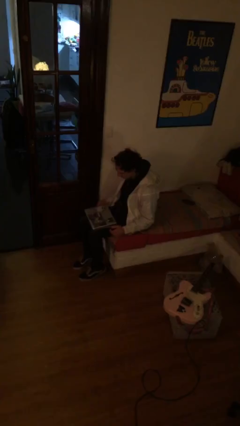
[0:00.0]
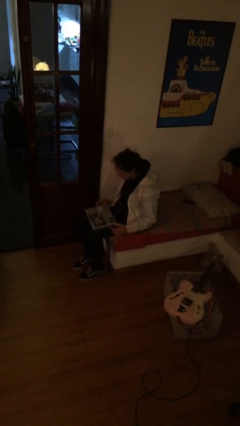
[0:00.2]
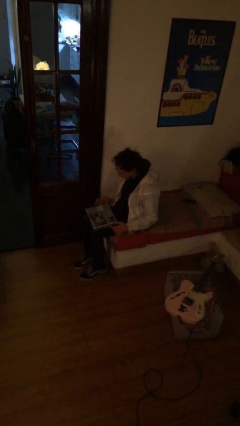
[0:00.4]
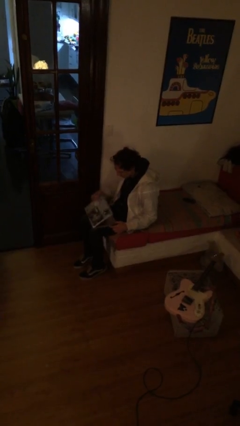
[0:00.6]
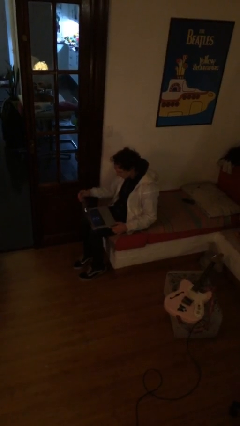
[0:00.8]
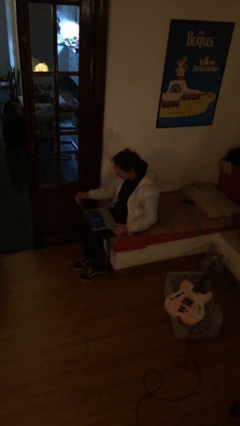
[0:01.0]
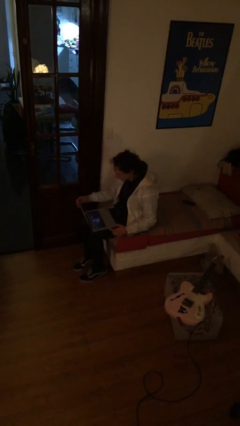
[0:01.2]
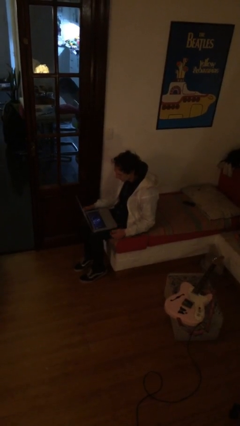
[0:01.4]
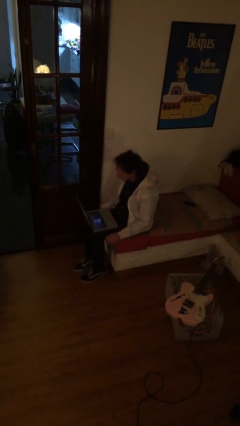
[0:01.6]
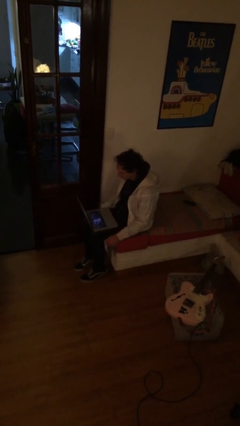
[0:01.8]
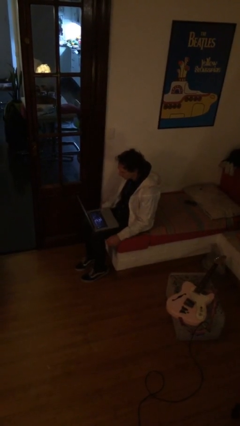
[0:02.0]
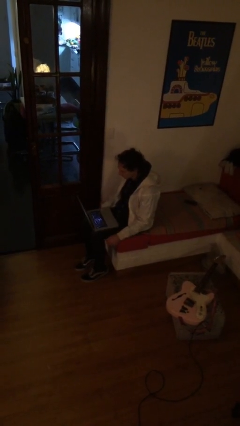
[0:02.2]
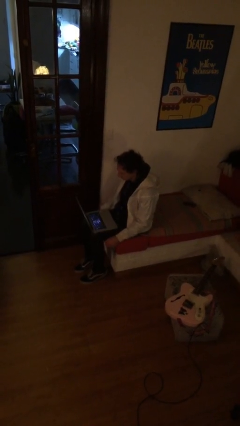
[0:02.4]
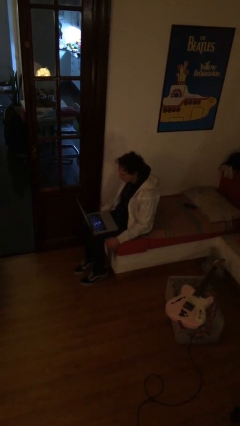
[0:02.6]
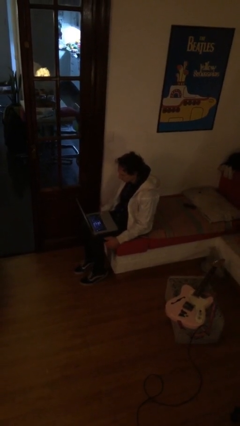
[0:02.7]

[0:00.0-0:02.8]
person opens laptop

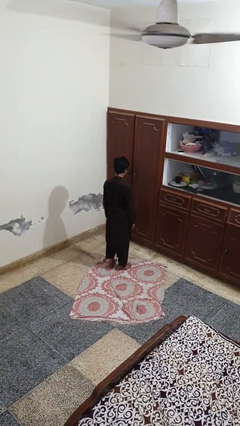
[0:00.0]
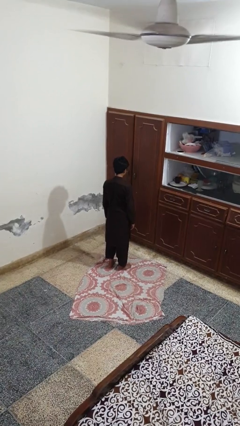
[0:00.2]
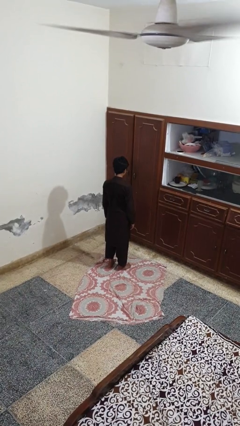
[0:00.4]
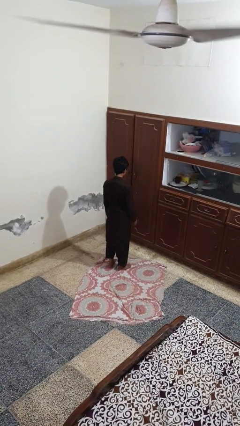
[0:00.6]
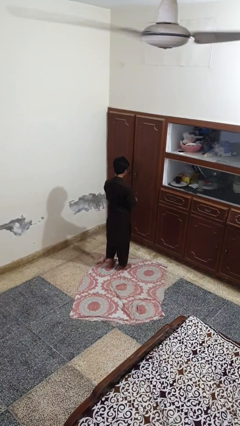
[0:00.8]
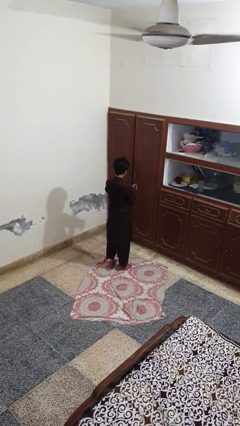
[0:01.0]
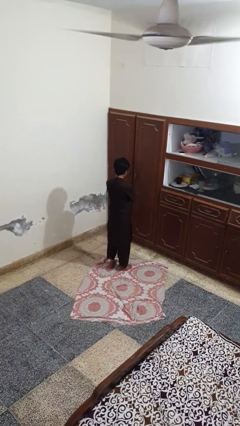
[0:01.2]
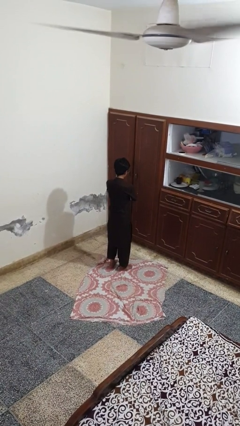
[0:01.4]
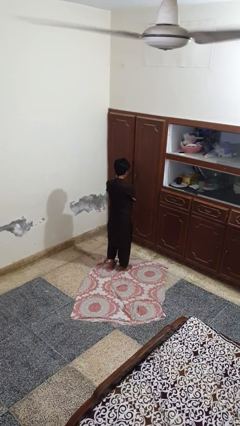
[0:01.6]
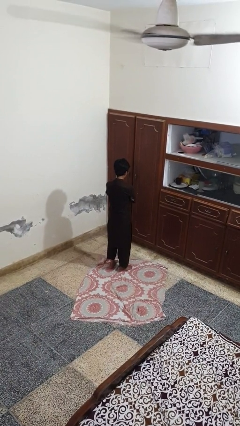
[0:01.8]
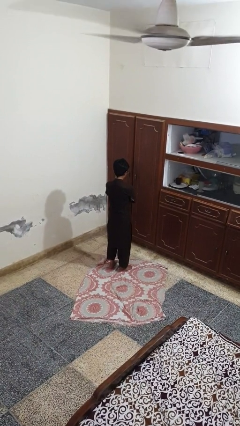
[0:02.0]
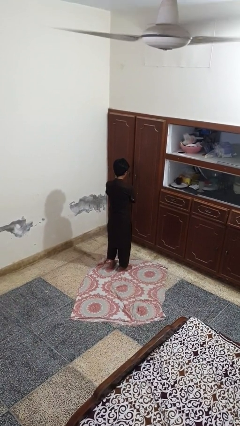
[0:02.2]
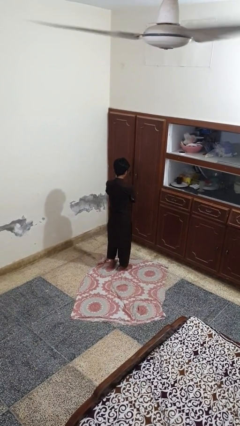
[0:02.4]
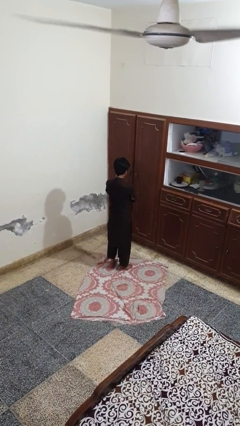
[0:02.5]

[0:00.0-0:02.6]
person crosses arms

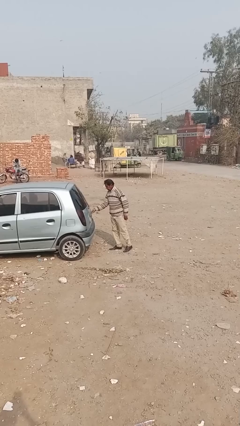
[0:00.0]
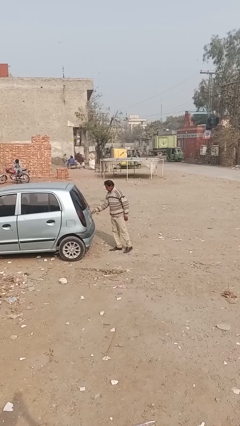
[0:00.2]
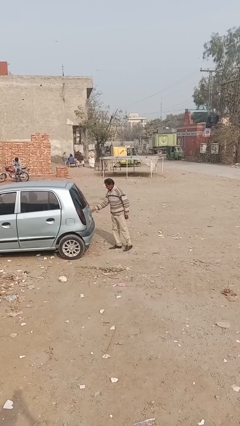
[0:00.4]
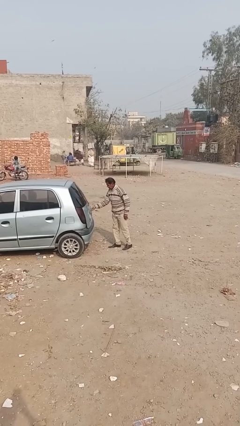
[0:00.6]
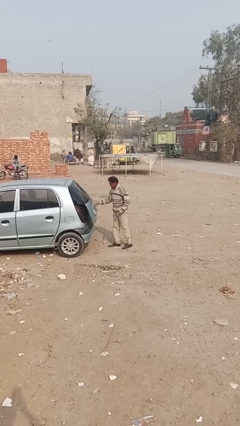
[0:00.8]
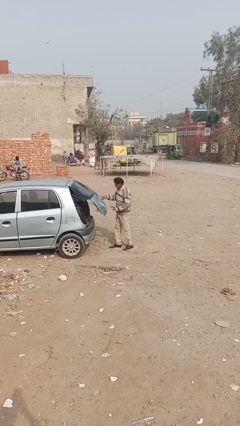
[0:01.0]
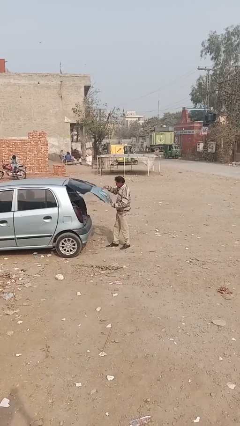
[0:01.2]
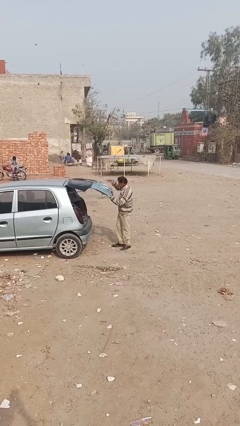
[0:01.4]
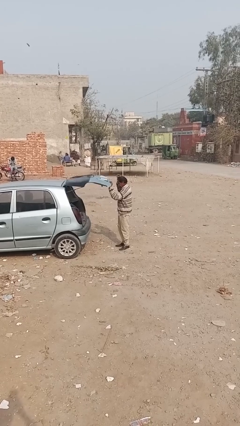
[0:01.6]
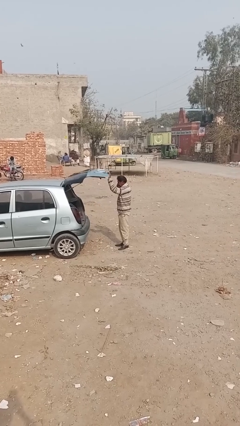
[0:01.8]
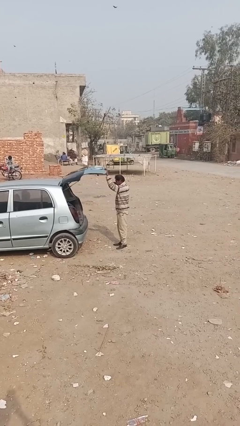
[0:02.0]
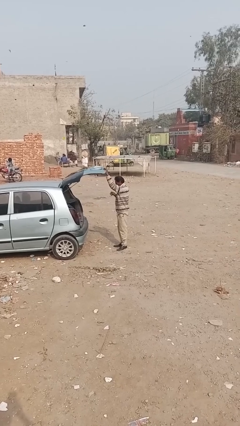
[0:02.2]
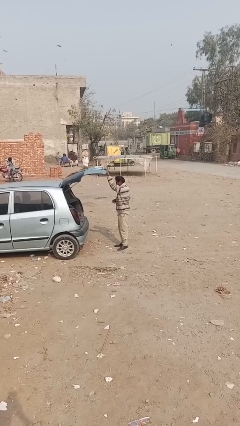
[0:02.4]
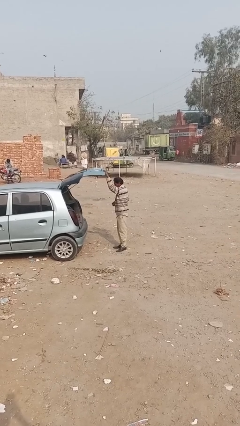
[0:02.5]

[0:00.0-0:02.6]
person opens car trunk

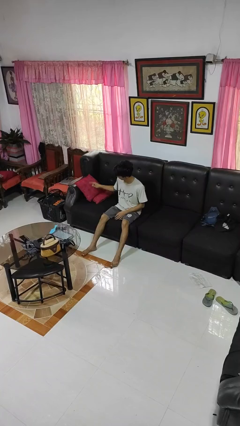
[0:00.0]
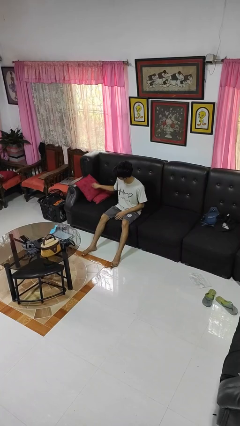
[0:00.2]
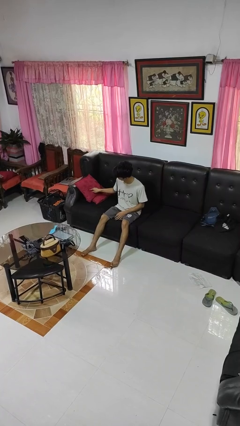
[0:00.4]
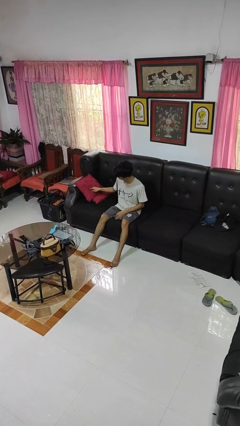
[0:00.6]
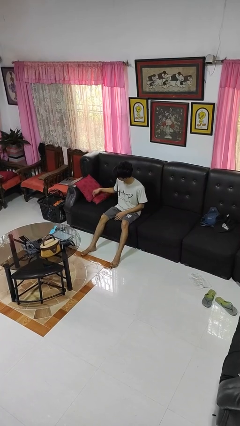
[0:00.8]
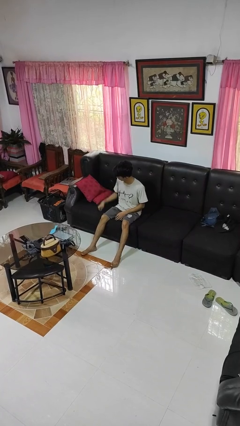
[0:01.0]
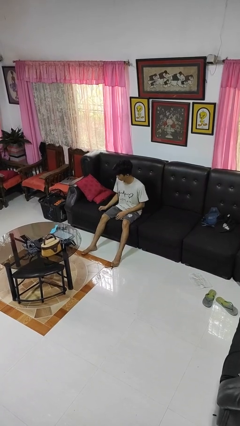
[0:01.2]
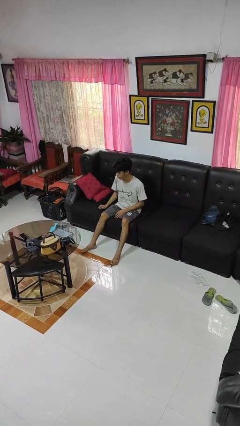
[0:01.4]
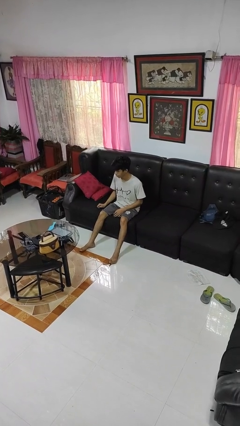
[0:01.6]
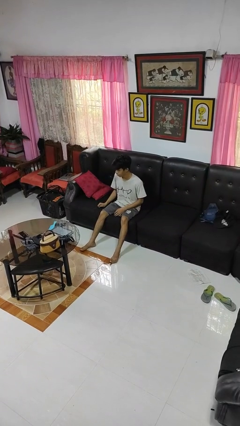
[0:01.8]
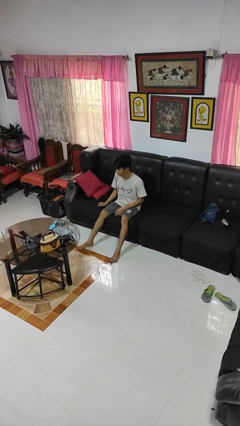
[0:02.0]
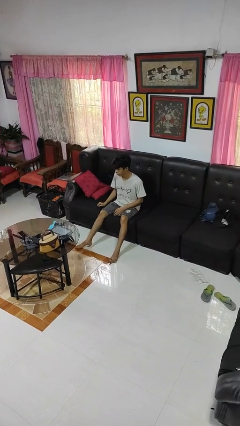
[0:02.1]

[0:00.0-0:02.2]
person taps object with finger

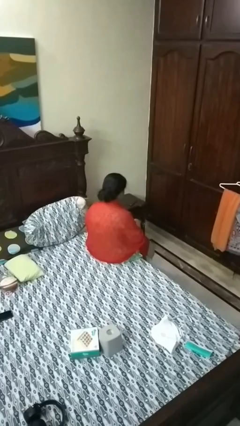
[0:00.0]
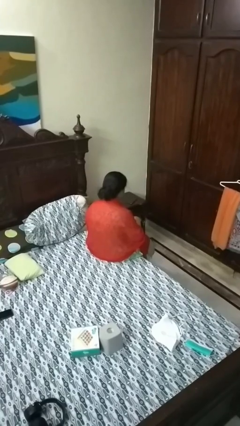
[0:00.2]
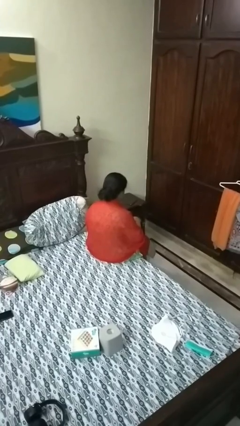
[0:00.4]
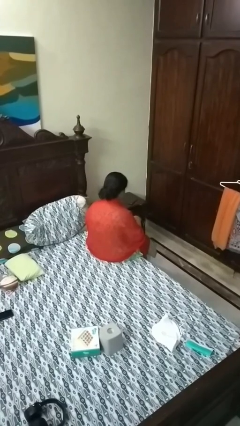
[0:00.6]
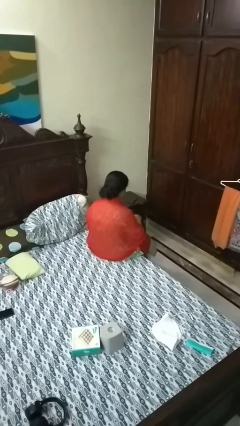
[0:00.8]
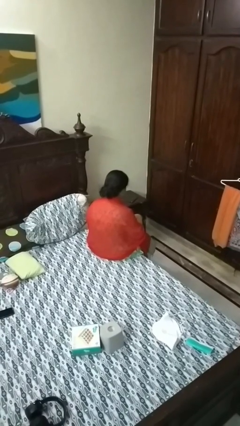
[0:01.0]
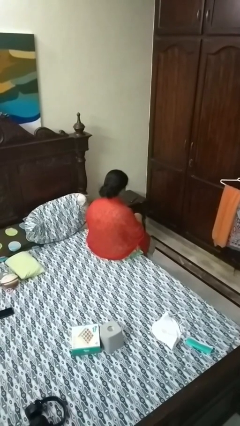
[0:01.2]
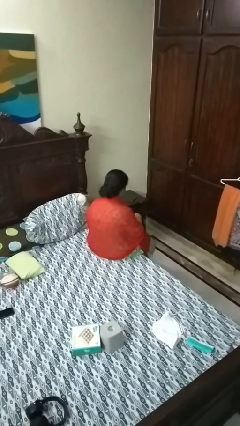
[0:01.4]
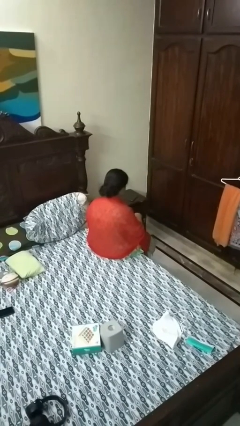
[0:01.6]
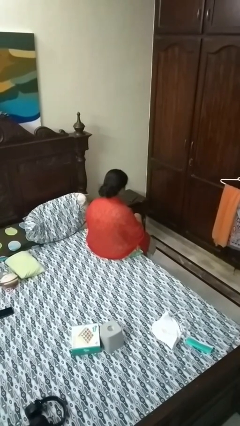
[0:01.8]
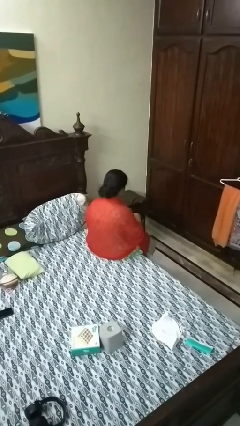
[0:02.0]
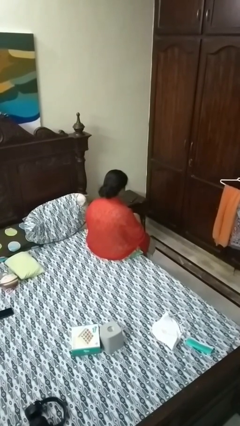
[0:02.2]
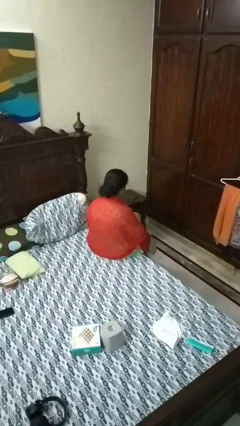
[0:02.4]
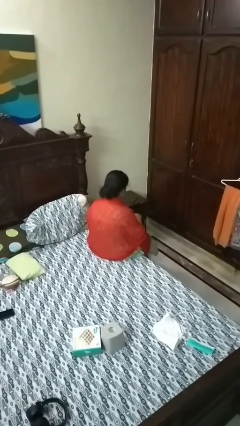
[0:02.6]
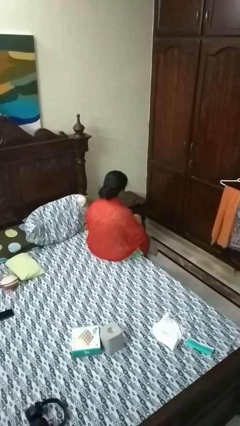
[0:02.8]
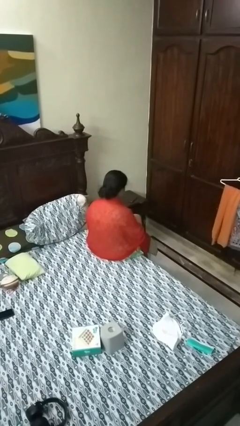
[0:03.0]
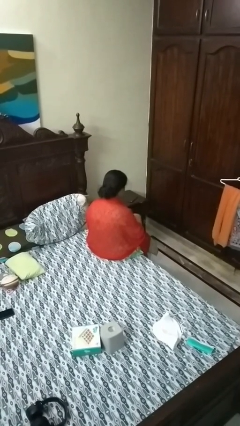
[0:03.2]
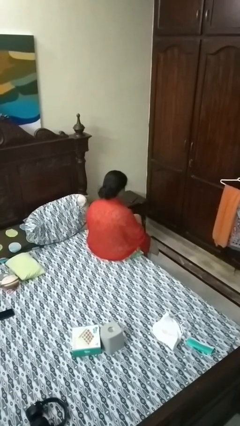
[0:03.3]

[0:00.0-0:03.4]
person searches in purse

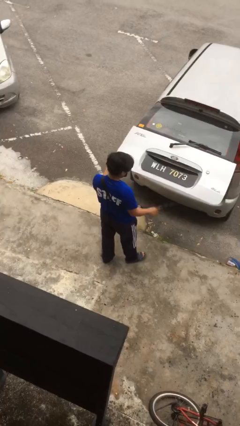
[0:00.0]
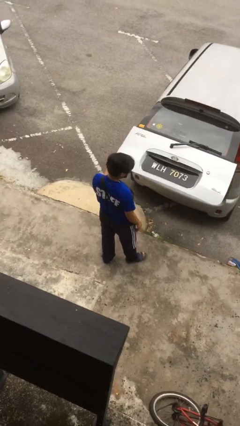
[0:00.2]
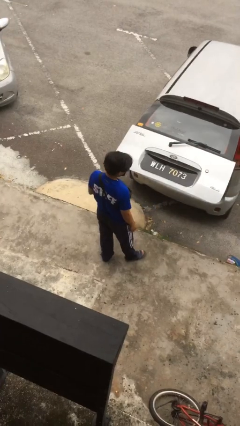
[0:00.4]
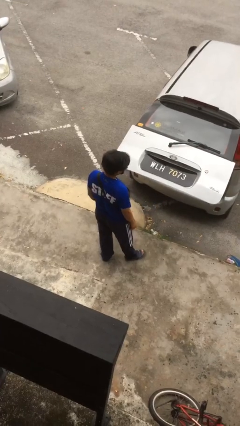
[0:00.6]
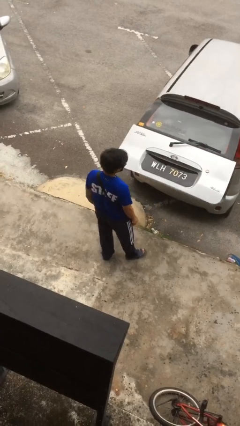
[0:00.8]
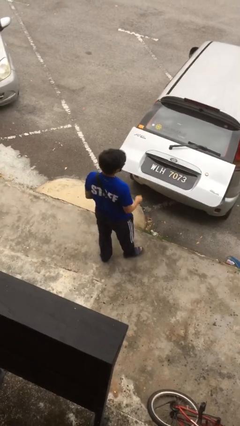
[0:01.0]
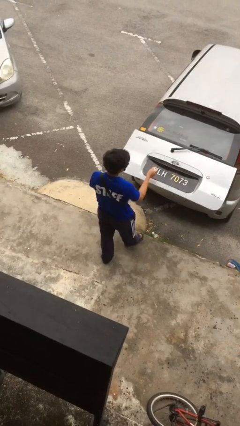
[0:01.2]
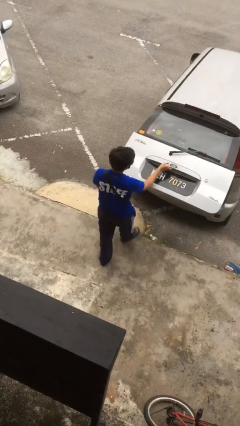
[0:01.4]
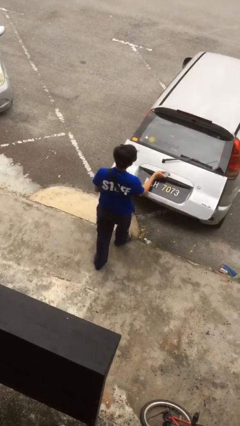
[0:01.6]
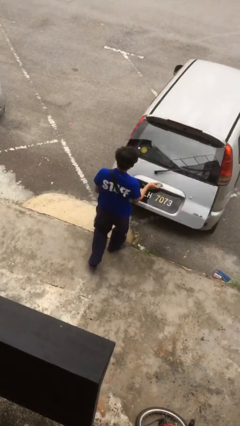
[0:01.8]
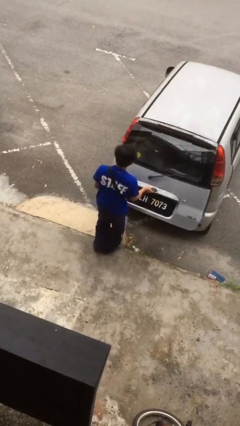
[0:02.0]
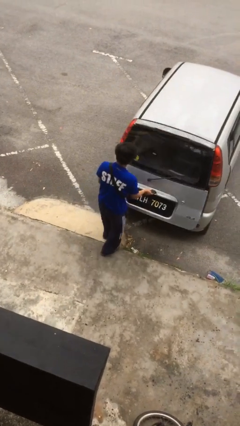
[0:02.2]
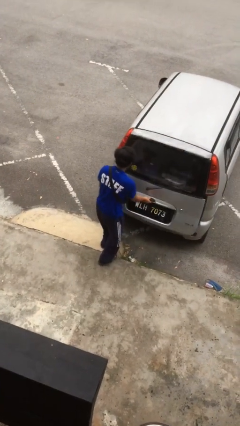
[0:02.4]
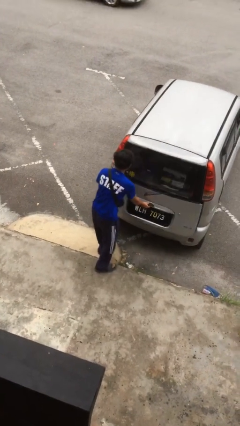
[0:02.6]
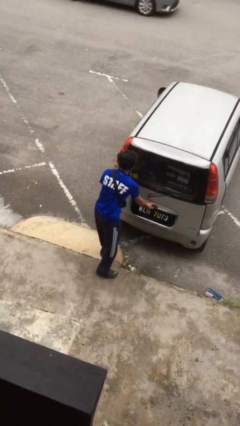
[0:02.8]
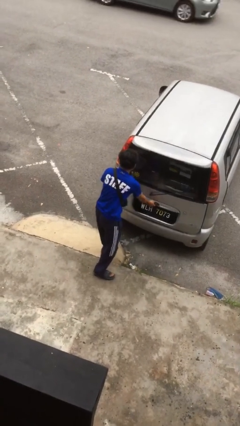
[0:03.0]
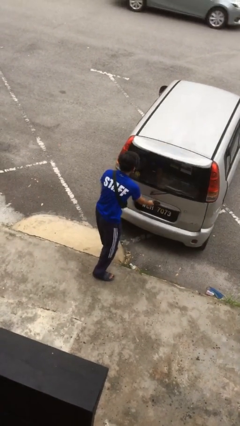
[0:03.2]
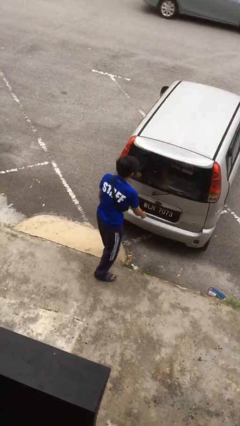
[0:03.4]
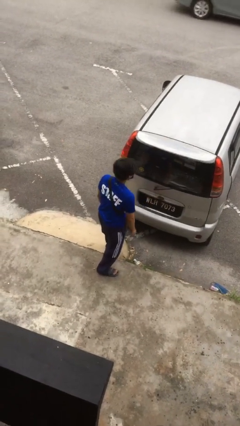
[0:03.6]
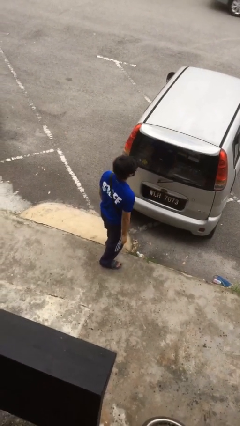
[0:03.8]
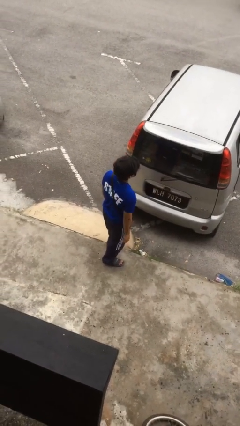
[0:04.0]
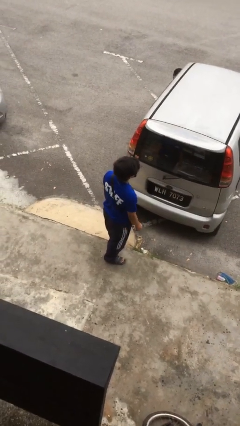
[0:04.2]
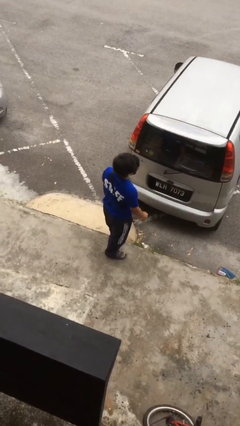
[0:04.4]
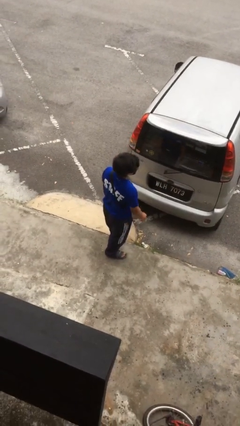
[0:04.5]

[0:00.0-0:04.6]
person closes car trunk
